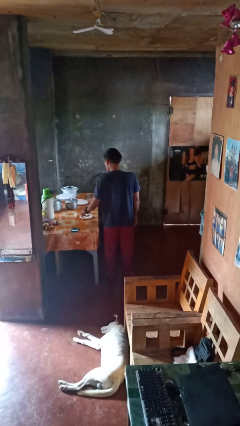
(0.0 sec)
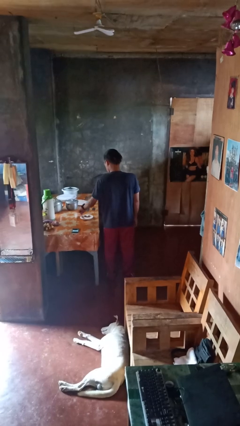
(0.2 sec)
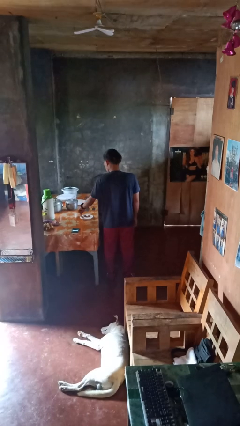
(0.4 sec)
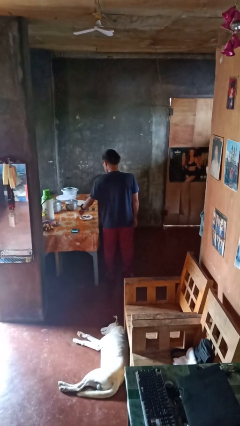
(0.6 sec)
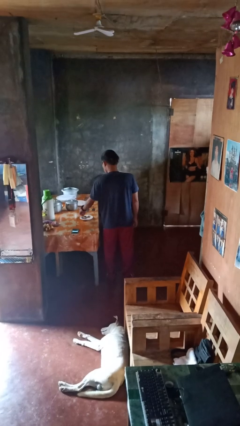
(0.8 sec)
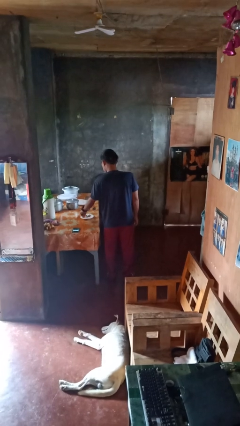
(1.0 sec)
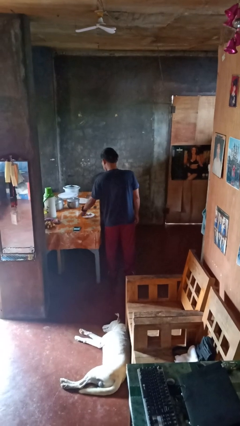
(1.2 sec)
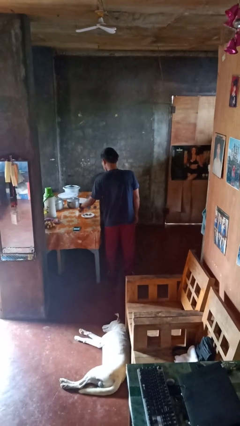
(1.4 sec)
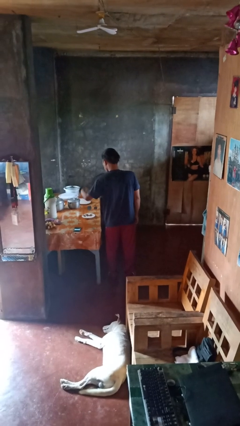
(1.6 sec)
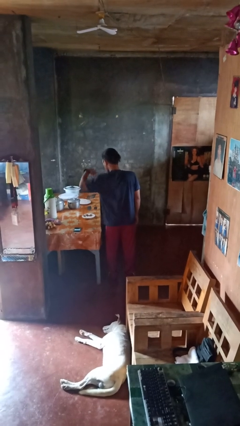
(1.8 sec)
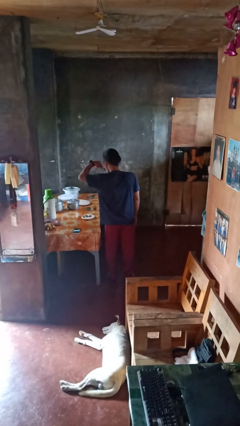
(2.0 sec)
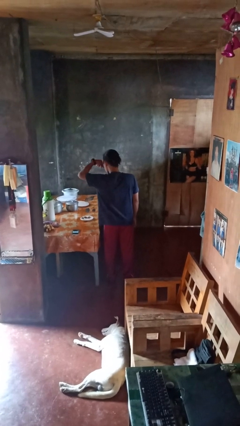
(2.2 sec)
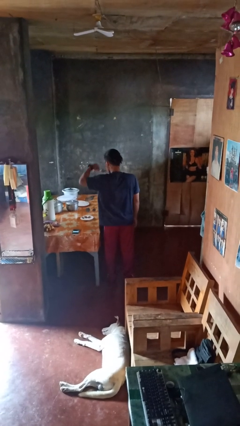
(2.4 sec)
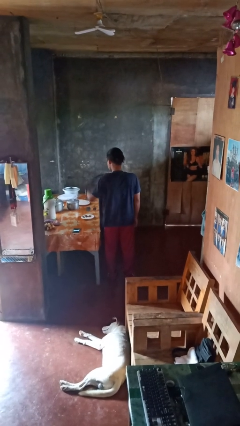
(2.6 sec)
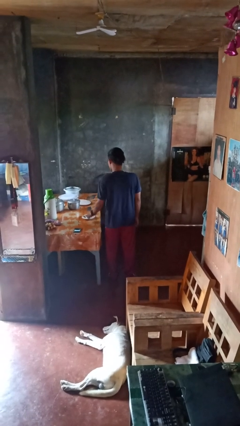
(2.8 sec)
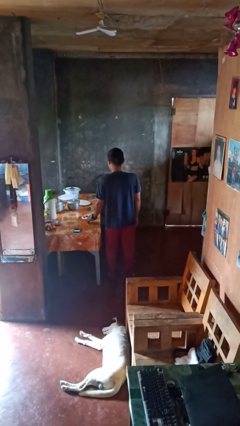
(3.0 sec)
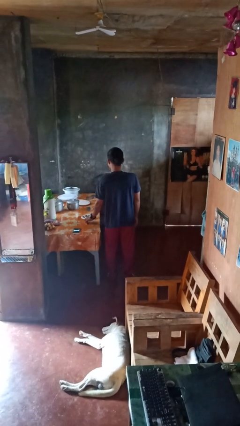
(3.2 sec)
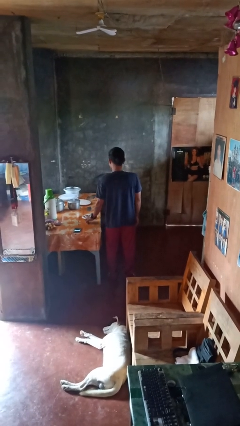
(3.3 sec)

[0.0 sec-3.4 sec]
person eats with utensil

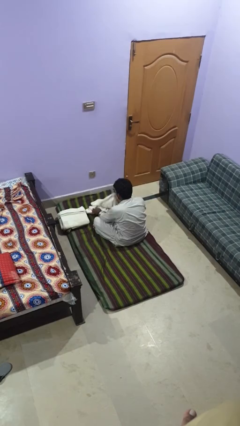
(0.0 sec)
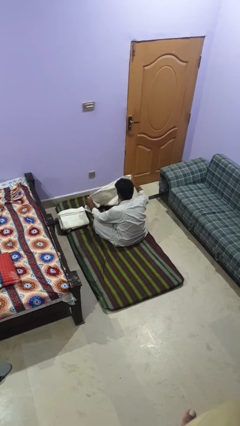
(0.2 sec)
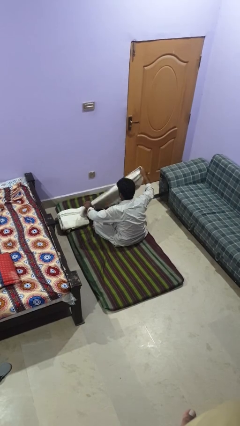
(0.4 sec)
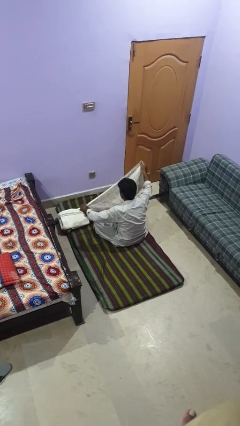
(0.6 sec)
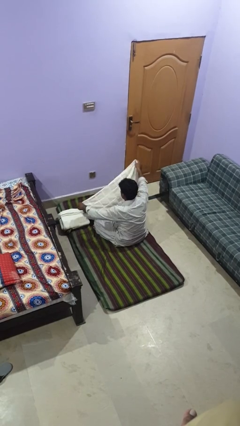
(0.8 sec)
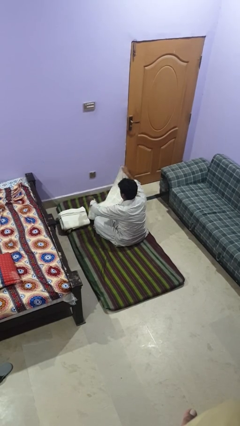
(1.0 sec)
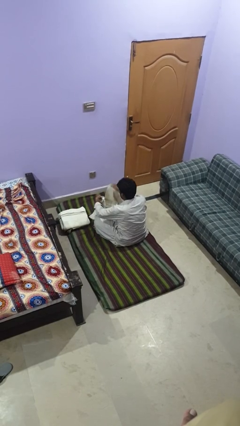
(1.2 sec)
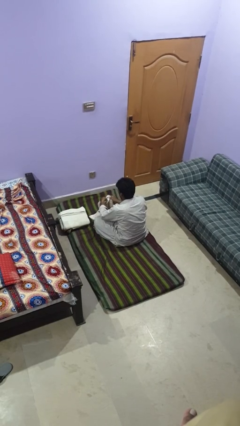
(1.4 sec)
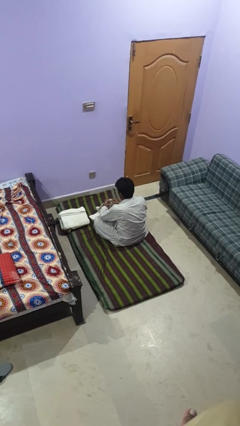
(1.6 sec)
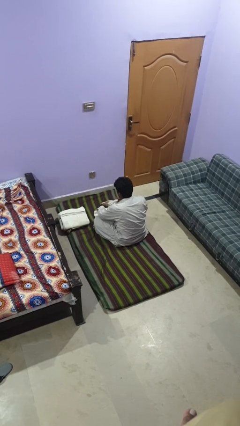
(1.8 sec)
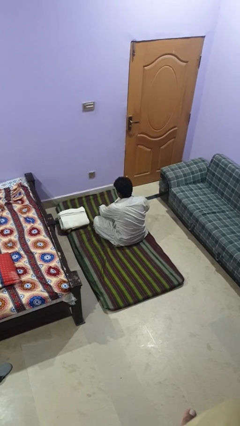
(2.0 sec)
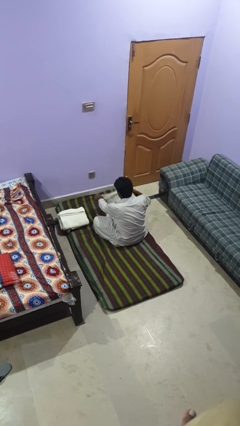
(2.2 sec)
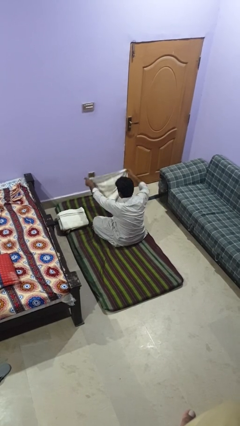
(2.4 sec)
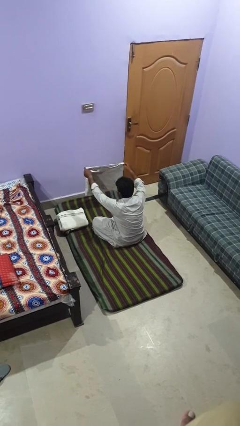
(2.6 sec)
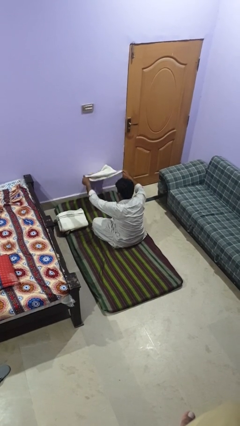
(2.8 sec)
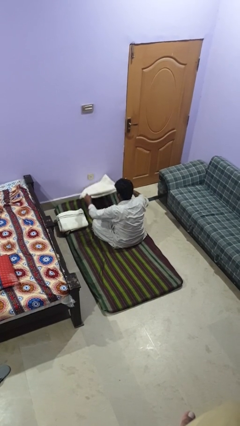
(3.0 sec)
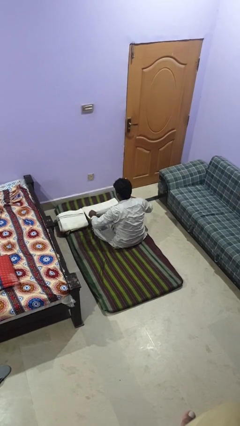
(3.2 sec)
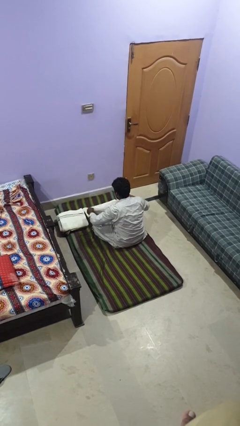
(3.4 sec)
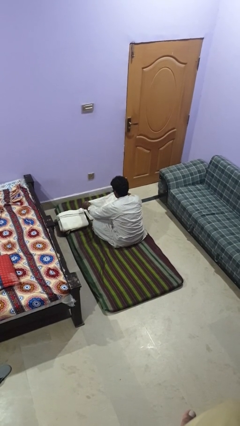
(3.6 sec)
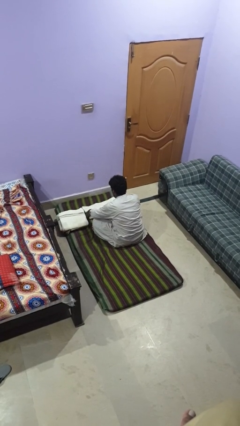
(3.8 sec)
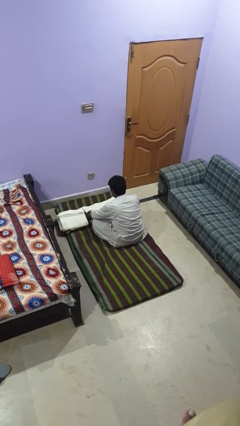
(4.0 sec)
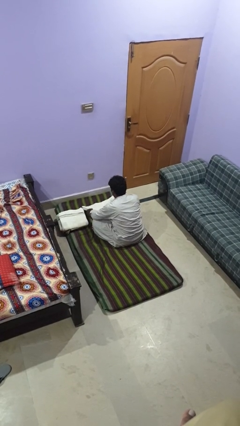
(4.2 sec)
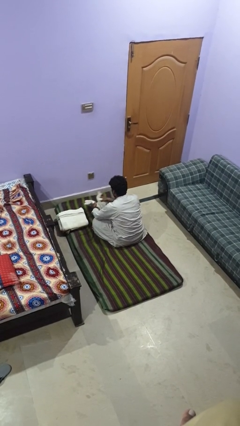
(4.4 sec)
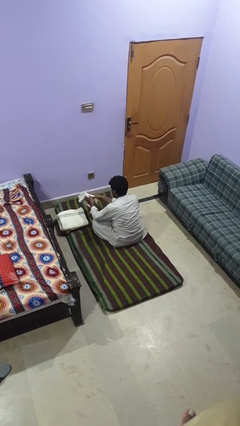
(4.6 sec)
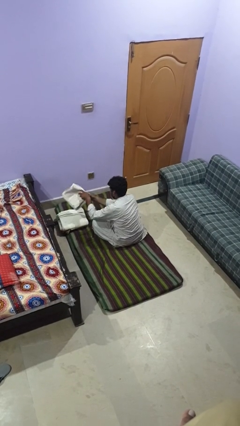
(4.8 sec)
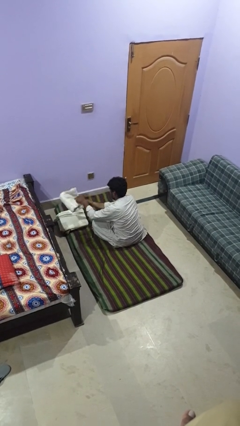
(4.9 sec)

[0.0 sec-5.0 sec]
person folds towel

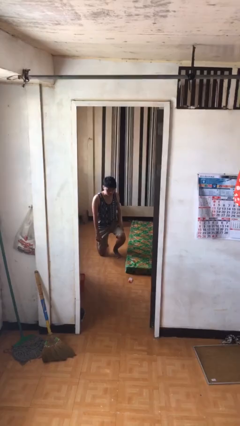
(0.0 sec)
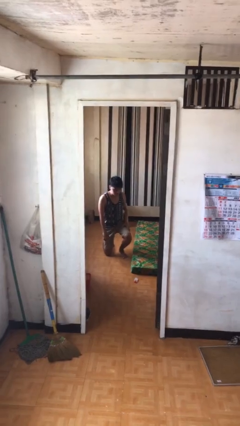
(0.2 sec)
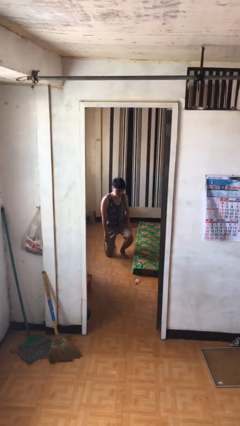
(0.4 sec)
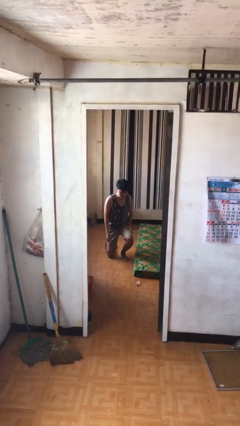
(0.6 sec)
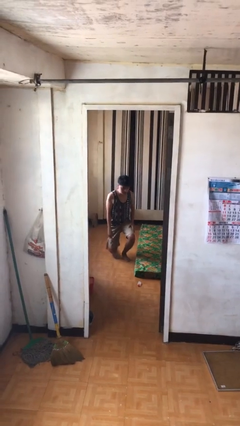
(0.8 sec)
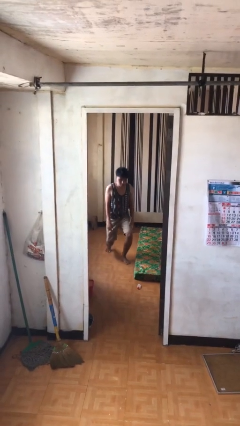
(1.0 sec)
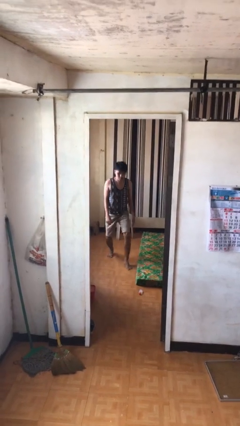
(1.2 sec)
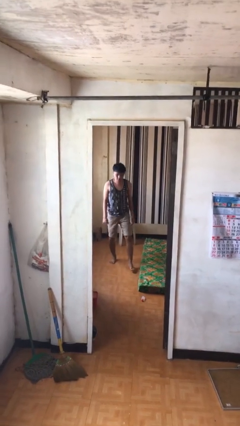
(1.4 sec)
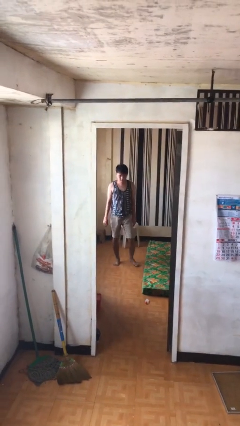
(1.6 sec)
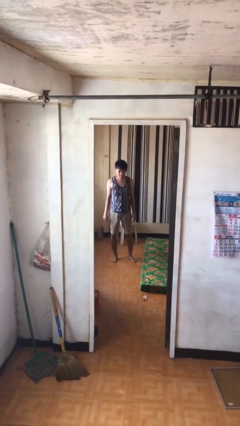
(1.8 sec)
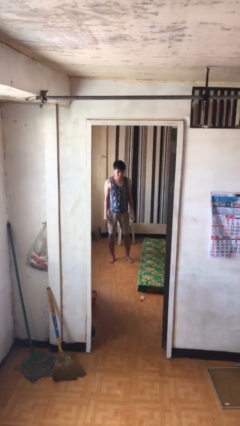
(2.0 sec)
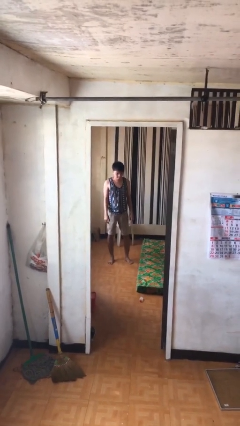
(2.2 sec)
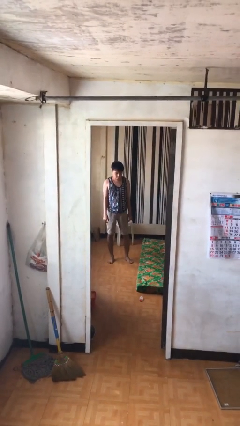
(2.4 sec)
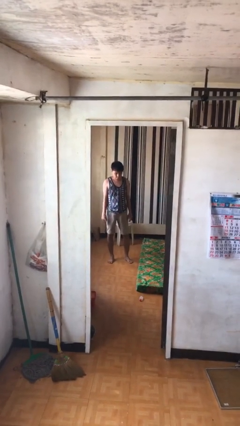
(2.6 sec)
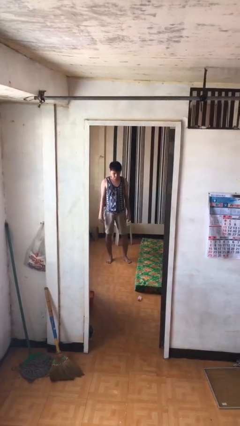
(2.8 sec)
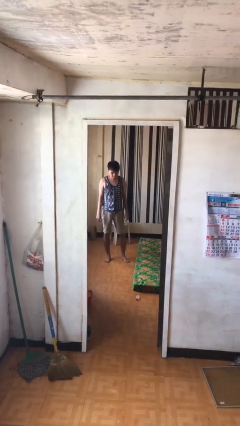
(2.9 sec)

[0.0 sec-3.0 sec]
person stands up from floor

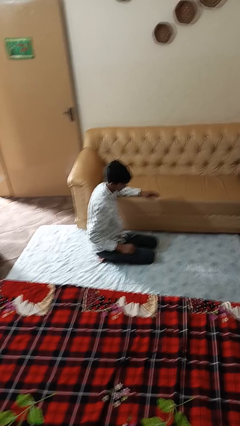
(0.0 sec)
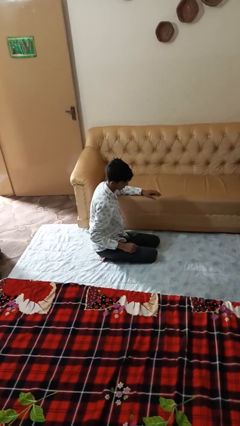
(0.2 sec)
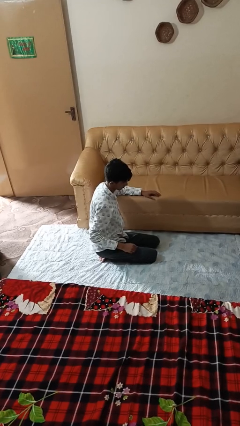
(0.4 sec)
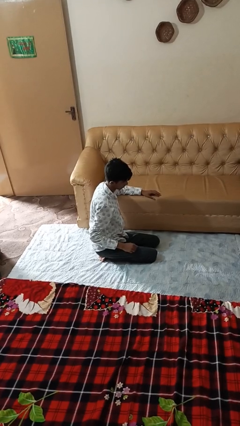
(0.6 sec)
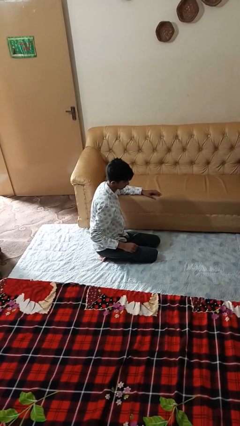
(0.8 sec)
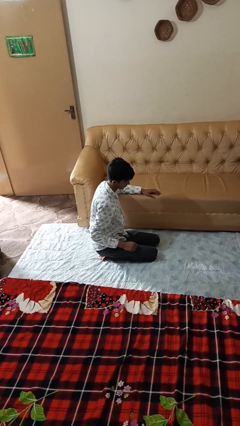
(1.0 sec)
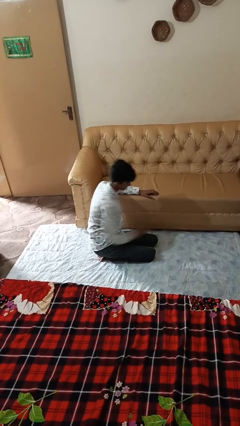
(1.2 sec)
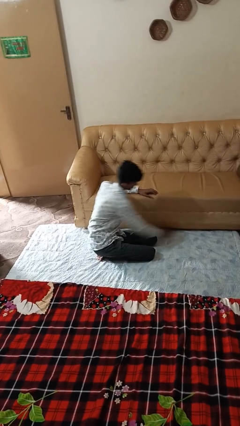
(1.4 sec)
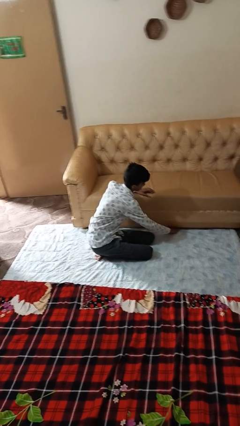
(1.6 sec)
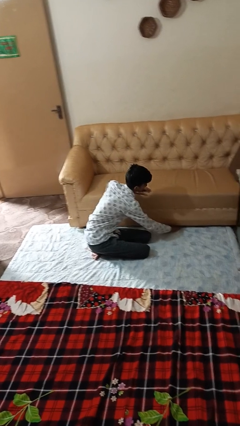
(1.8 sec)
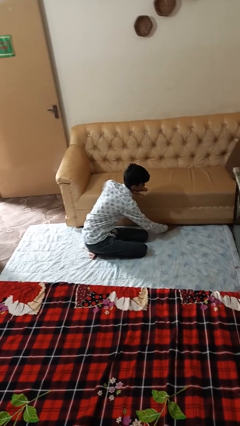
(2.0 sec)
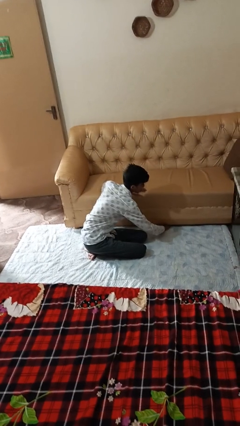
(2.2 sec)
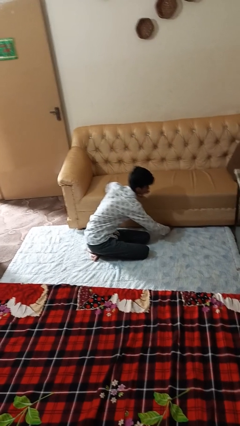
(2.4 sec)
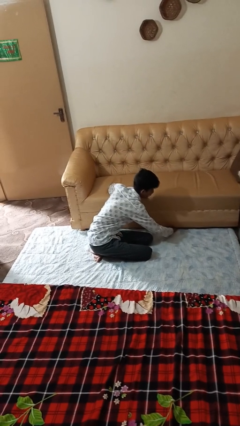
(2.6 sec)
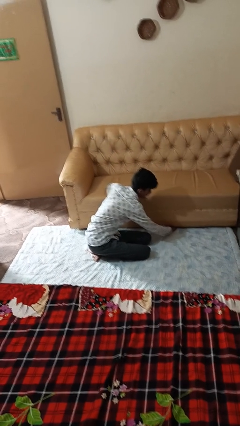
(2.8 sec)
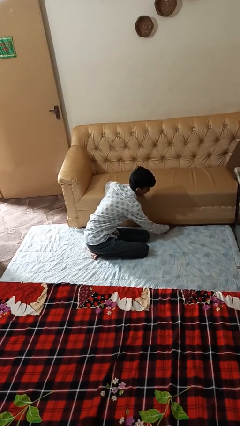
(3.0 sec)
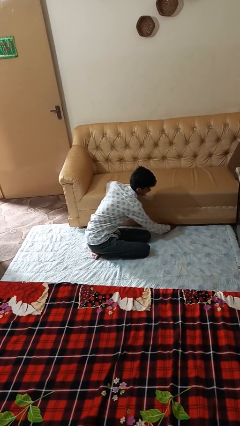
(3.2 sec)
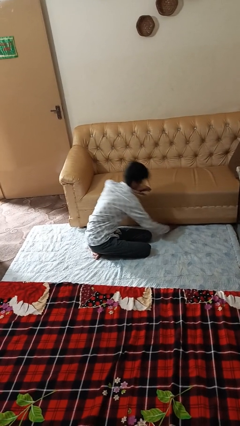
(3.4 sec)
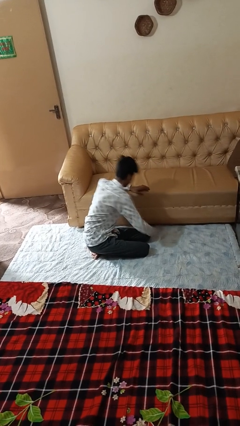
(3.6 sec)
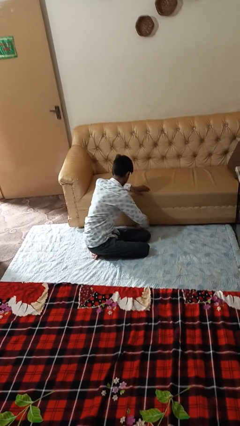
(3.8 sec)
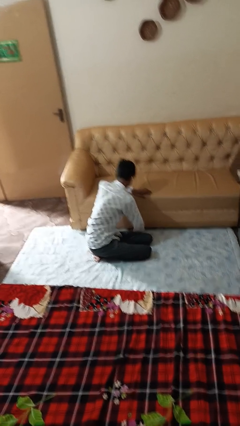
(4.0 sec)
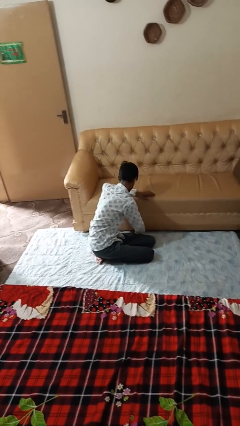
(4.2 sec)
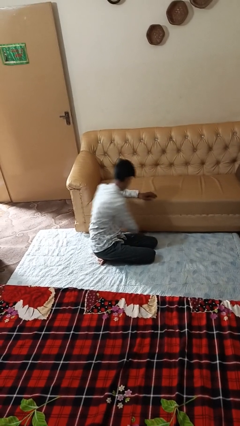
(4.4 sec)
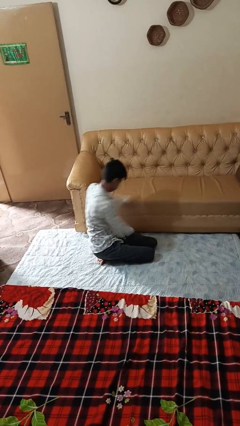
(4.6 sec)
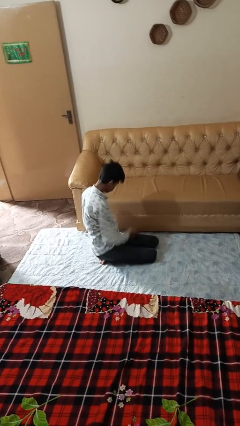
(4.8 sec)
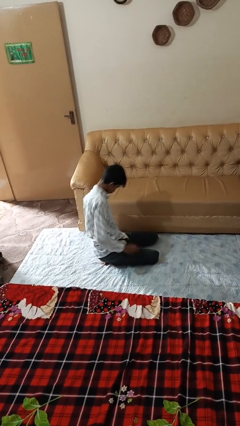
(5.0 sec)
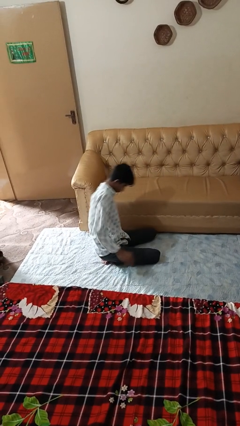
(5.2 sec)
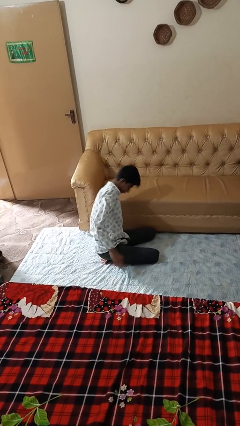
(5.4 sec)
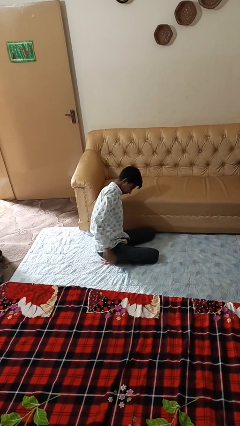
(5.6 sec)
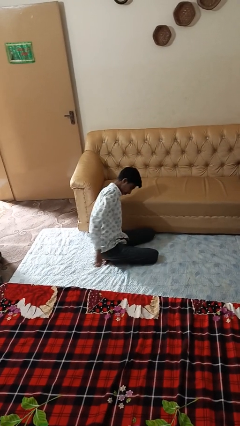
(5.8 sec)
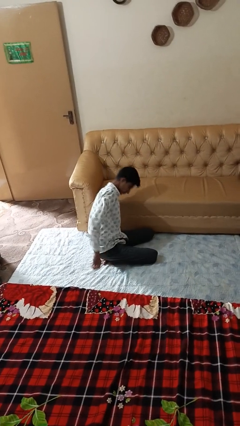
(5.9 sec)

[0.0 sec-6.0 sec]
person searches under couch

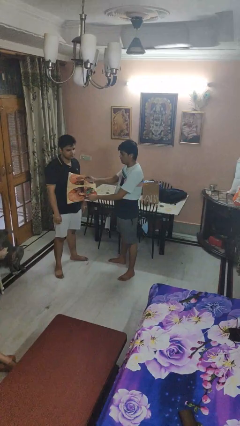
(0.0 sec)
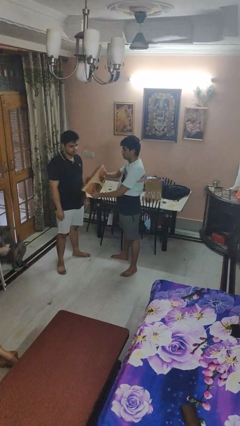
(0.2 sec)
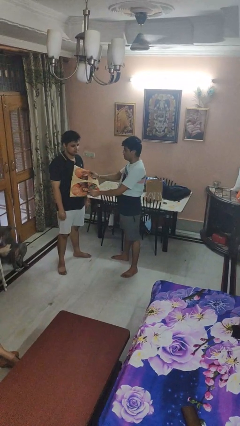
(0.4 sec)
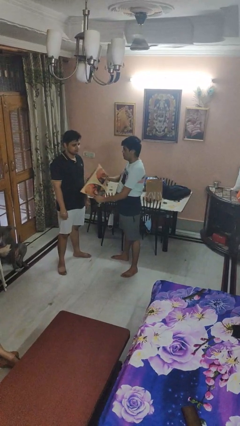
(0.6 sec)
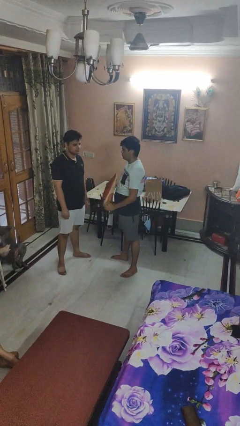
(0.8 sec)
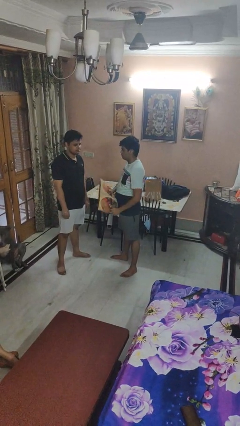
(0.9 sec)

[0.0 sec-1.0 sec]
person hits person with pillow
